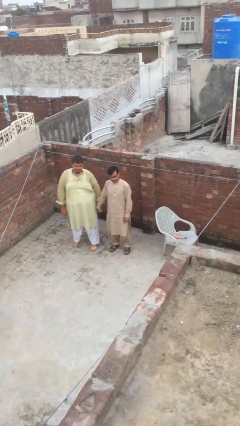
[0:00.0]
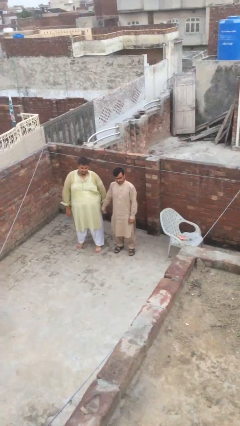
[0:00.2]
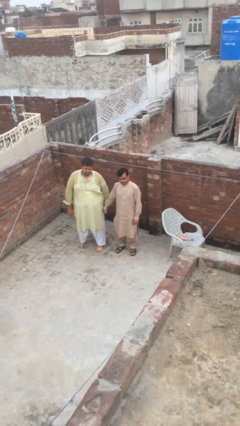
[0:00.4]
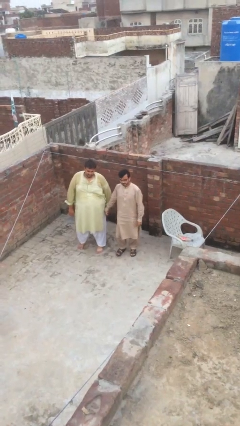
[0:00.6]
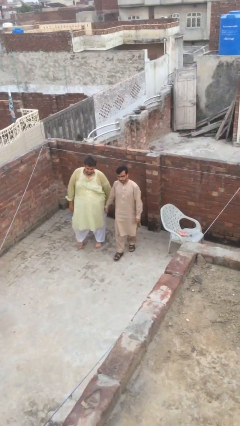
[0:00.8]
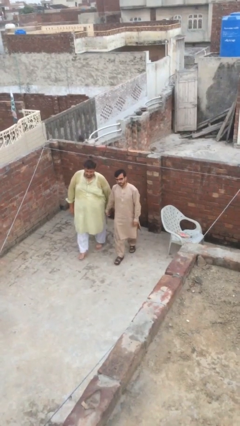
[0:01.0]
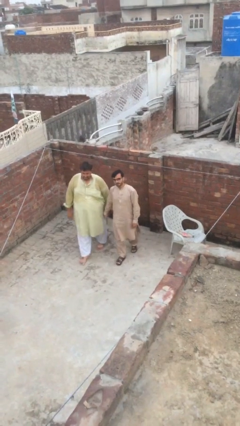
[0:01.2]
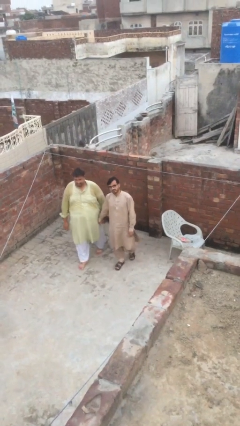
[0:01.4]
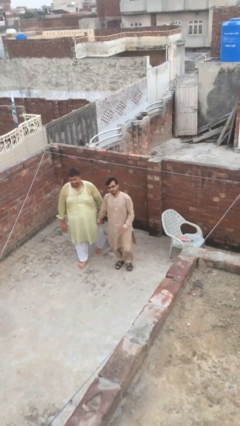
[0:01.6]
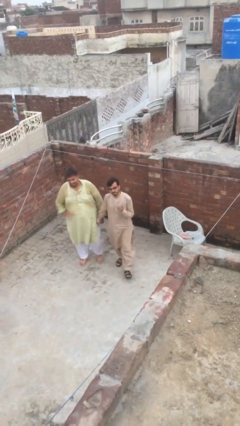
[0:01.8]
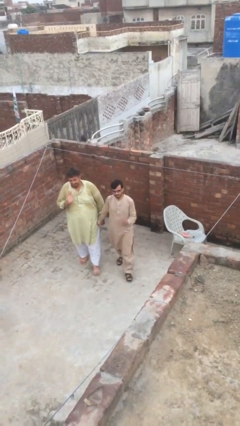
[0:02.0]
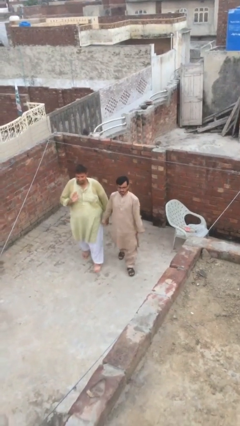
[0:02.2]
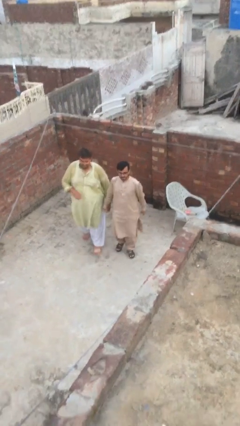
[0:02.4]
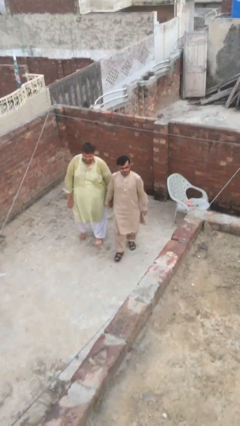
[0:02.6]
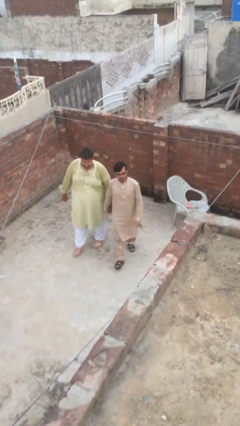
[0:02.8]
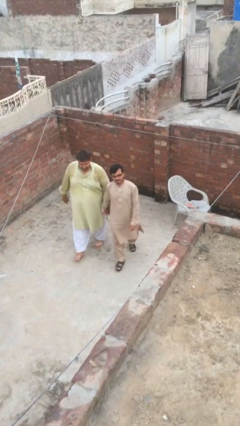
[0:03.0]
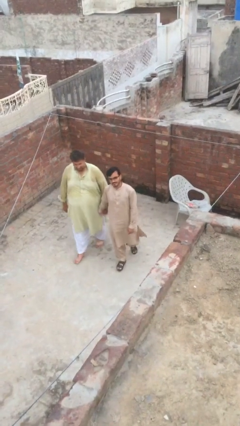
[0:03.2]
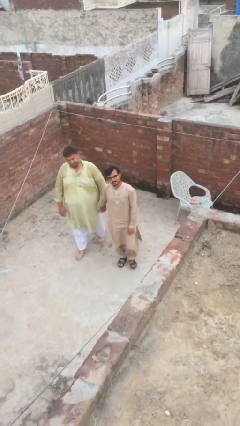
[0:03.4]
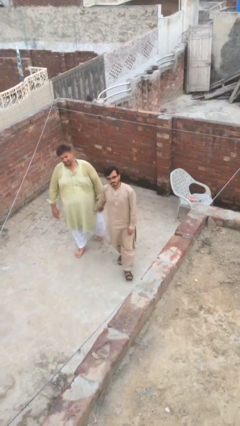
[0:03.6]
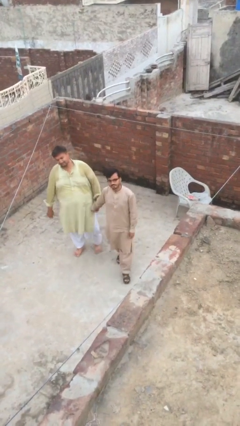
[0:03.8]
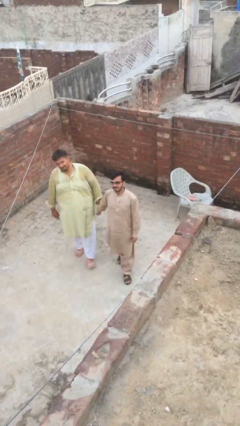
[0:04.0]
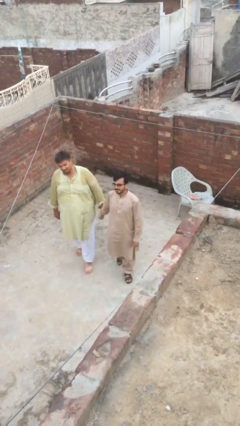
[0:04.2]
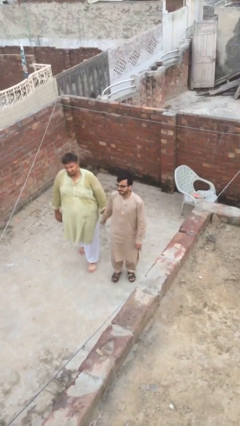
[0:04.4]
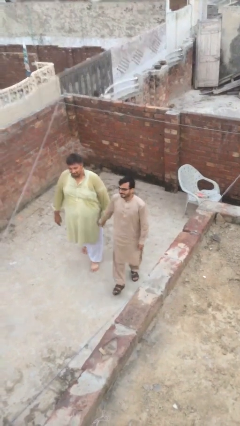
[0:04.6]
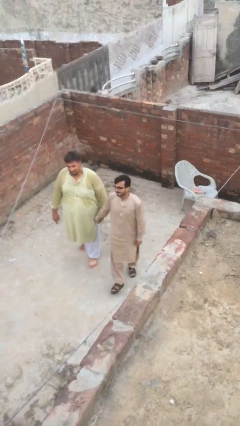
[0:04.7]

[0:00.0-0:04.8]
person holds hand

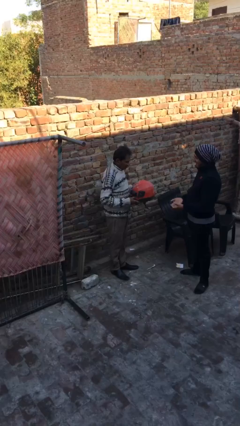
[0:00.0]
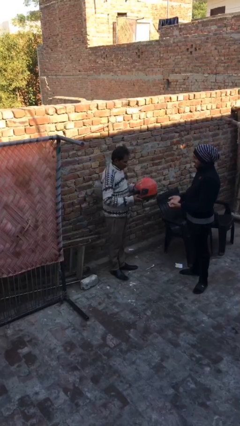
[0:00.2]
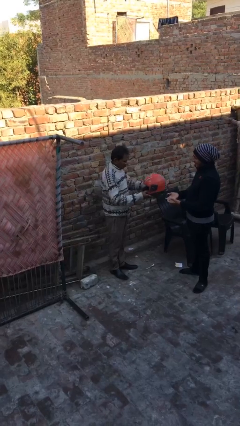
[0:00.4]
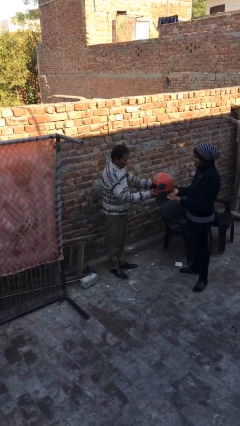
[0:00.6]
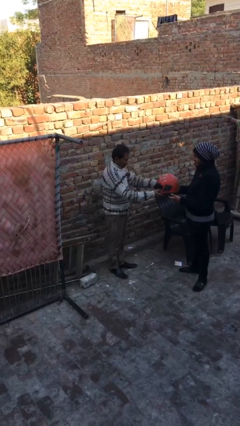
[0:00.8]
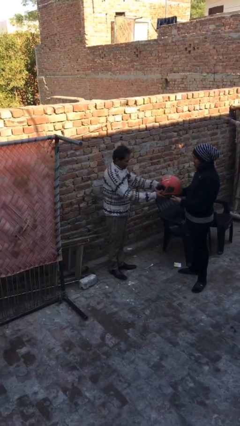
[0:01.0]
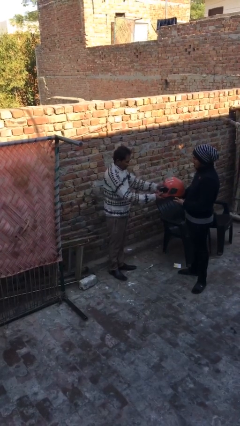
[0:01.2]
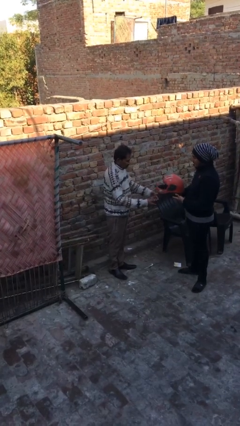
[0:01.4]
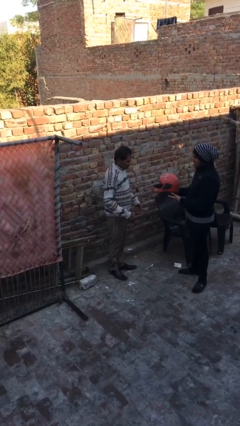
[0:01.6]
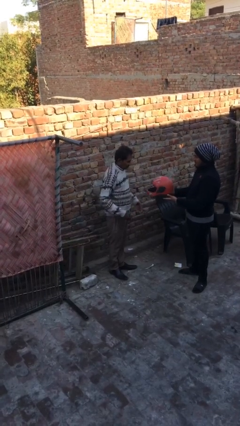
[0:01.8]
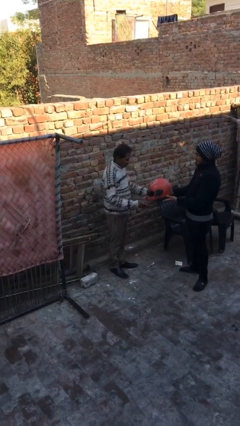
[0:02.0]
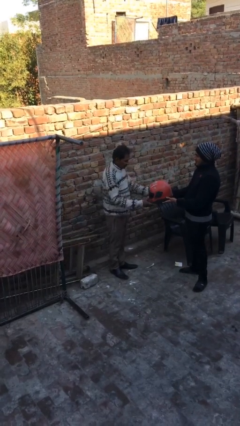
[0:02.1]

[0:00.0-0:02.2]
person transfers object to person

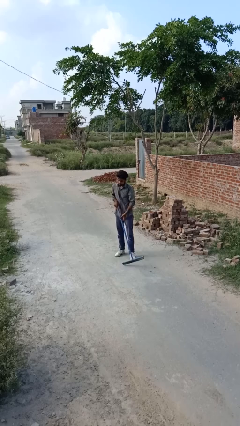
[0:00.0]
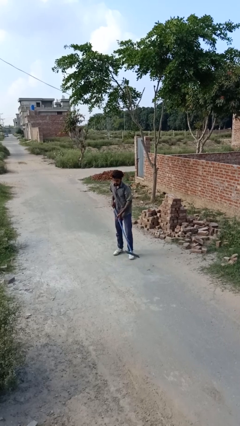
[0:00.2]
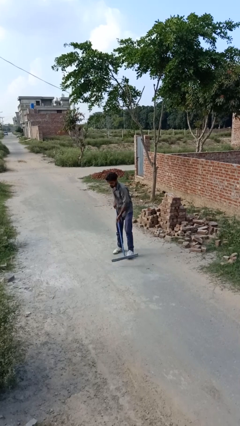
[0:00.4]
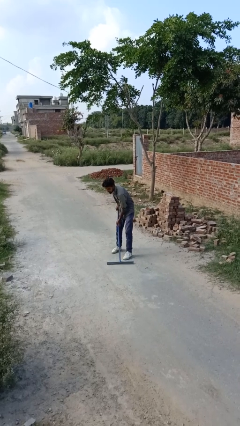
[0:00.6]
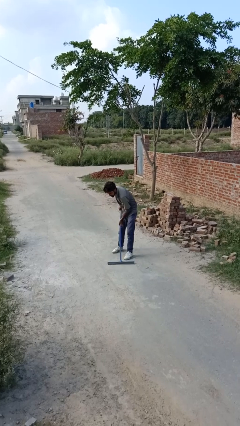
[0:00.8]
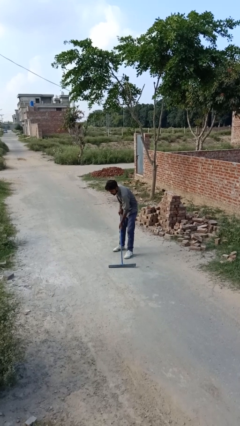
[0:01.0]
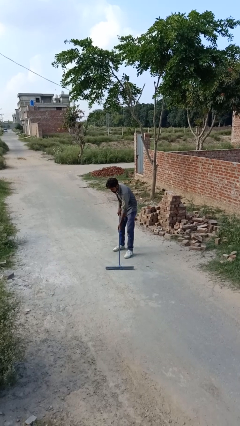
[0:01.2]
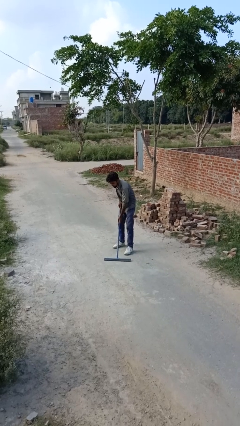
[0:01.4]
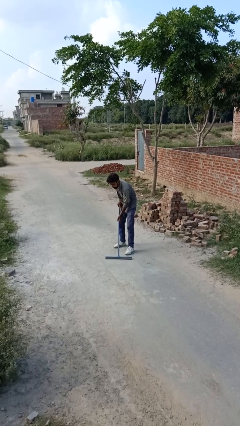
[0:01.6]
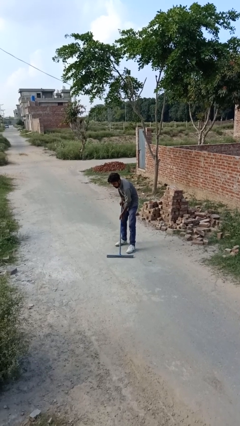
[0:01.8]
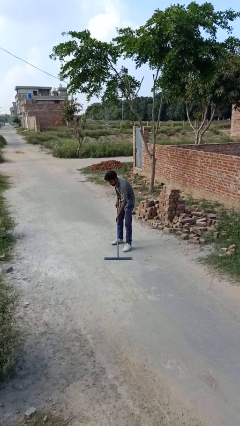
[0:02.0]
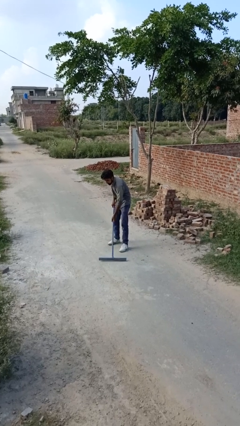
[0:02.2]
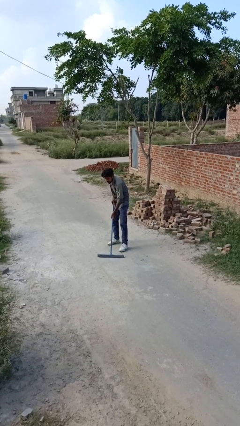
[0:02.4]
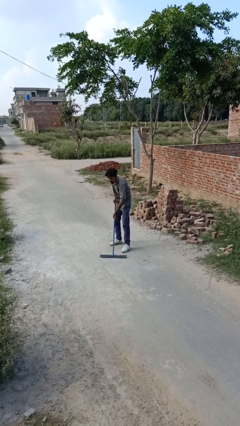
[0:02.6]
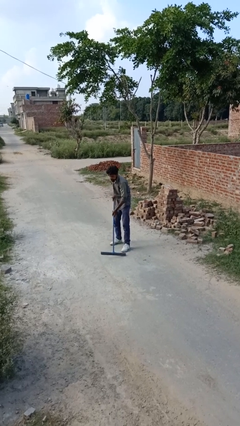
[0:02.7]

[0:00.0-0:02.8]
person sweeps floor

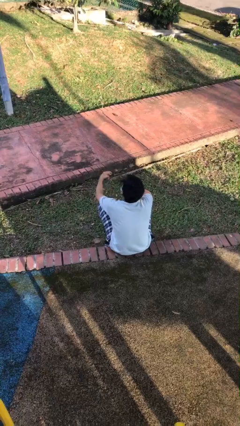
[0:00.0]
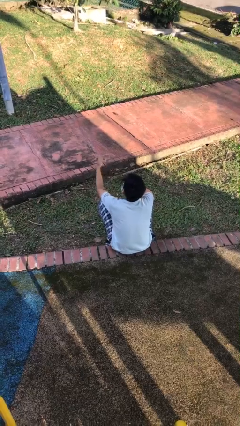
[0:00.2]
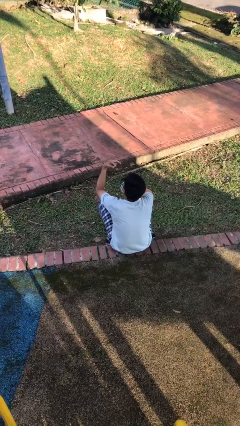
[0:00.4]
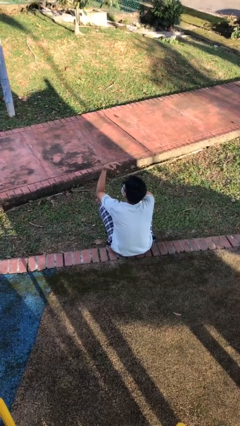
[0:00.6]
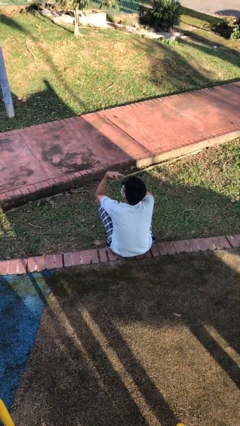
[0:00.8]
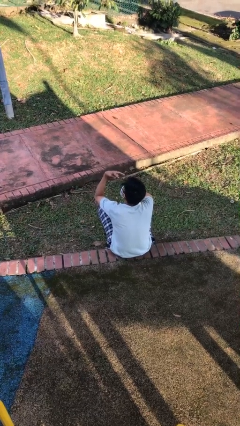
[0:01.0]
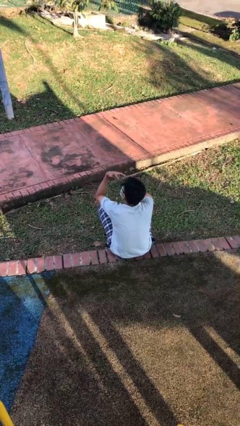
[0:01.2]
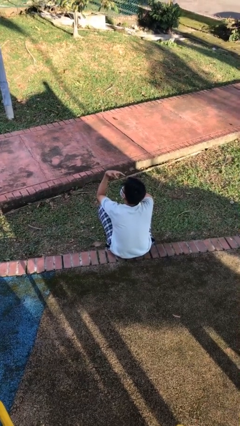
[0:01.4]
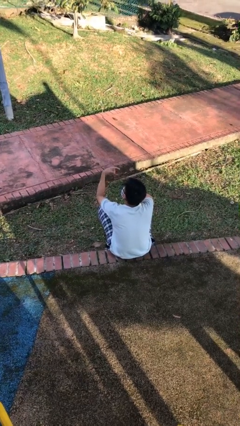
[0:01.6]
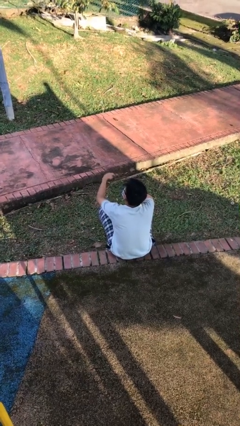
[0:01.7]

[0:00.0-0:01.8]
person gestures watch closely

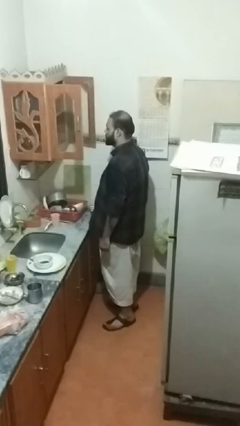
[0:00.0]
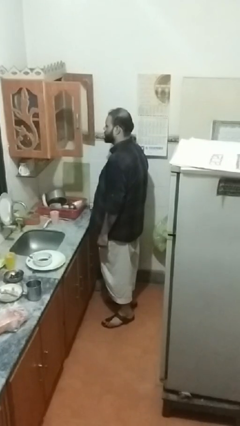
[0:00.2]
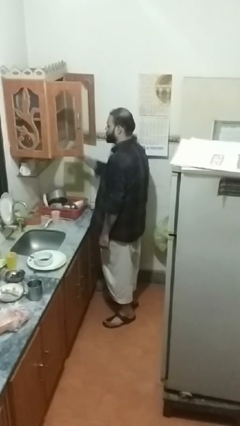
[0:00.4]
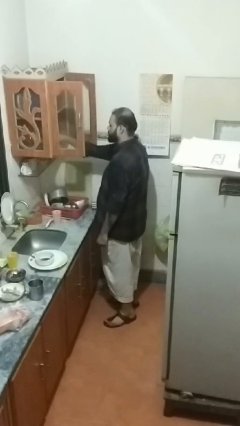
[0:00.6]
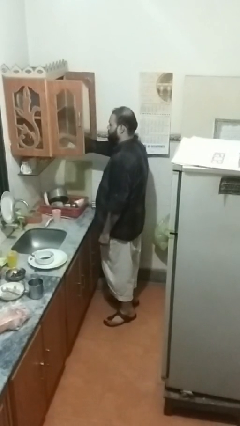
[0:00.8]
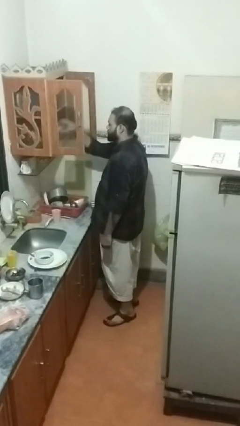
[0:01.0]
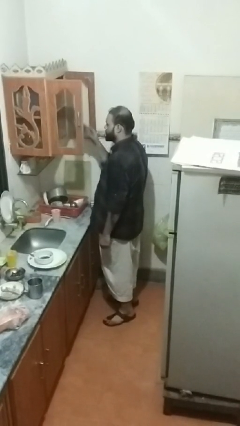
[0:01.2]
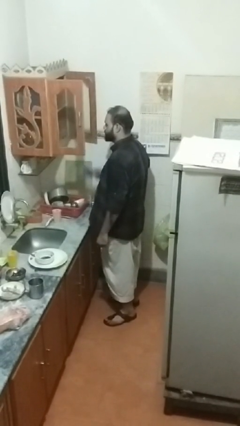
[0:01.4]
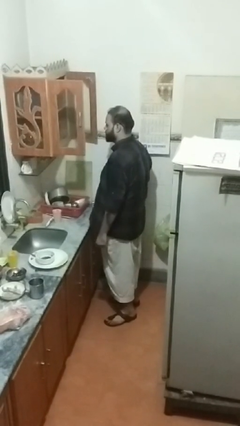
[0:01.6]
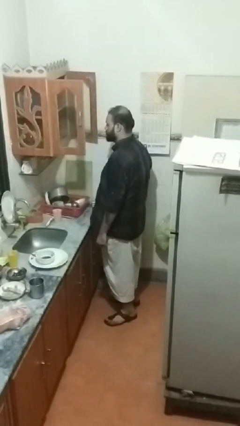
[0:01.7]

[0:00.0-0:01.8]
person takes object from cabinet

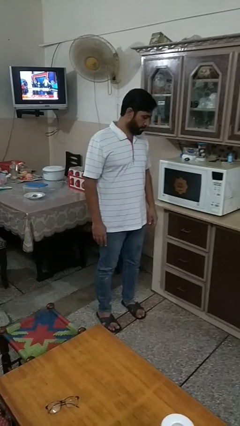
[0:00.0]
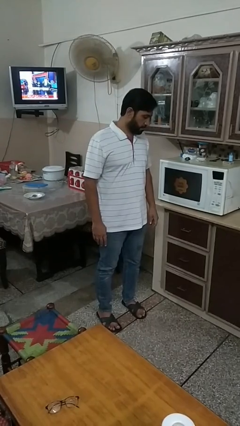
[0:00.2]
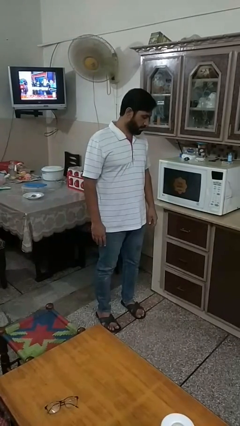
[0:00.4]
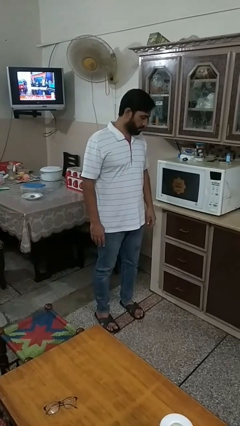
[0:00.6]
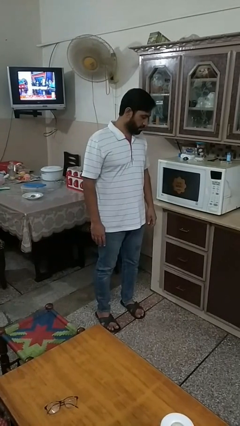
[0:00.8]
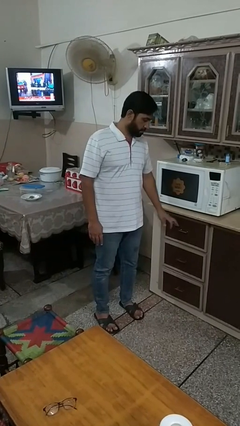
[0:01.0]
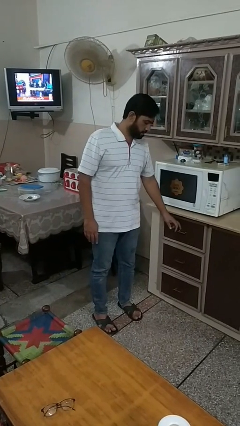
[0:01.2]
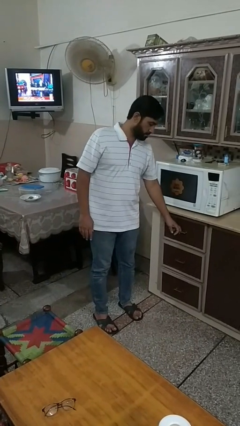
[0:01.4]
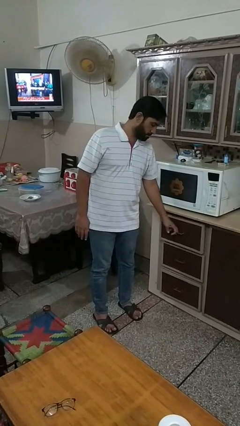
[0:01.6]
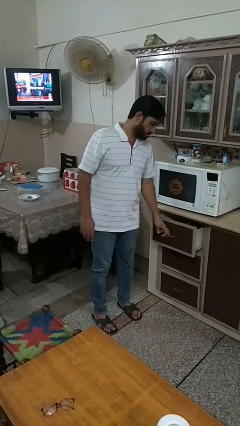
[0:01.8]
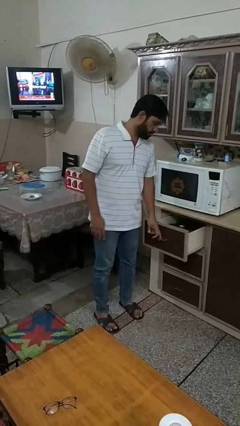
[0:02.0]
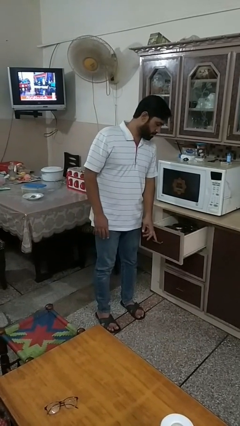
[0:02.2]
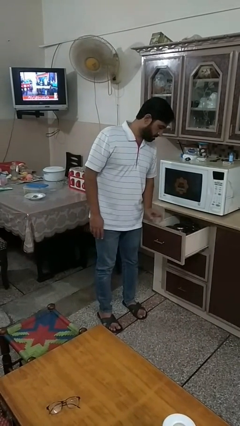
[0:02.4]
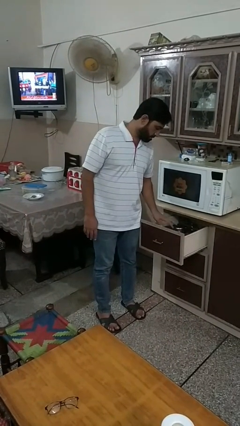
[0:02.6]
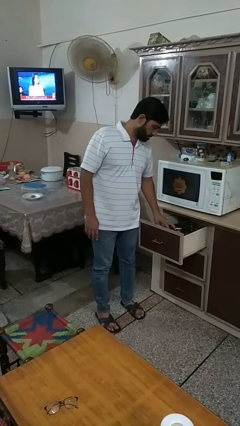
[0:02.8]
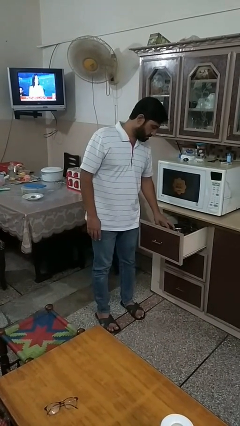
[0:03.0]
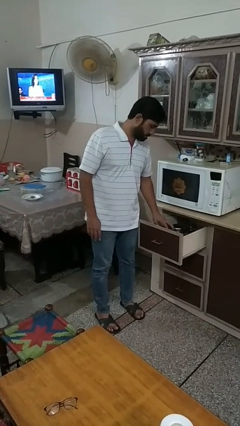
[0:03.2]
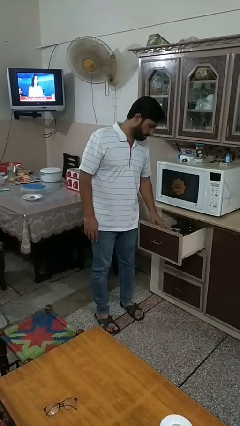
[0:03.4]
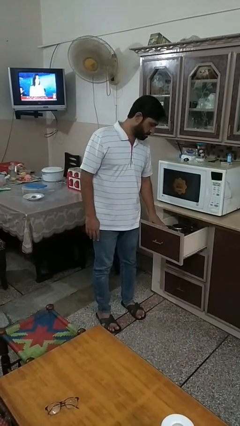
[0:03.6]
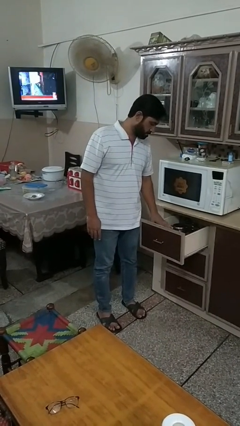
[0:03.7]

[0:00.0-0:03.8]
person opens kitchen drawer
